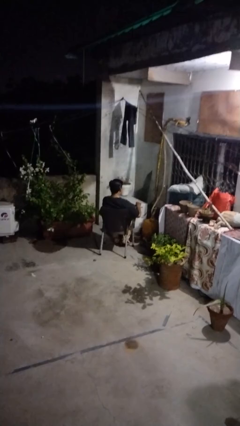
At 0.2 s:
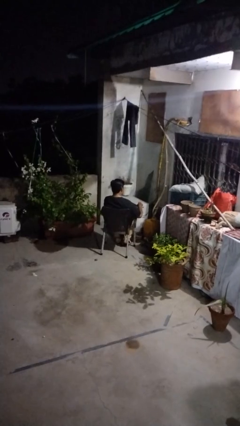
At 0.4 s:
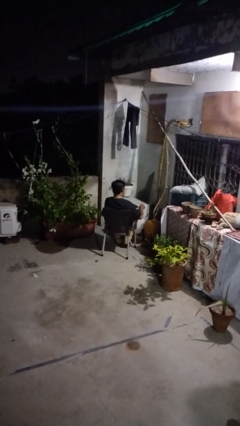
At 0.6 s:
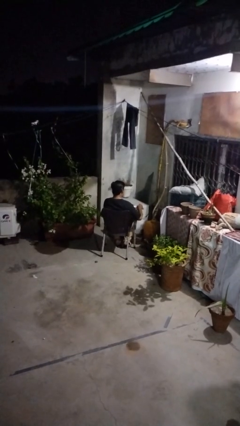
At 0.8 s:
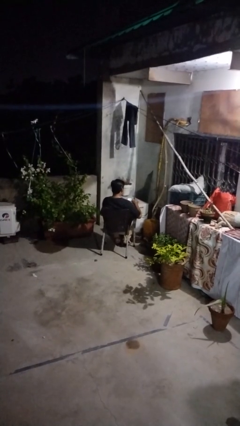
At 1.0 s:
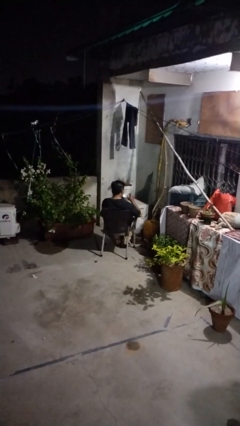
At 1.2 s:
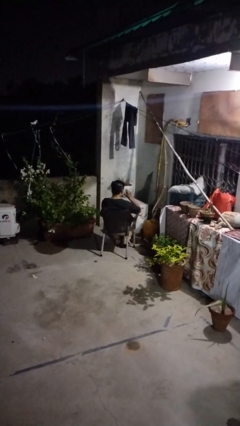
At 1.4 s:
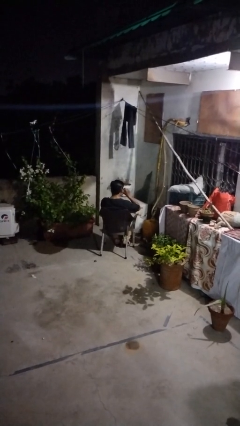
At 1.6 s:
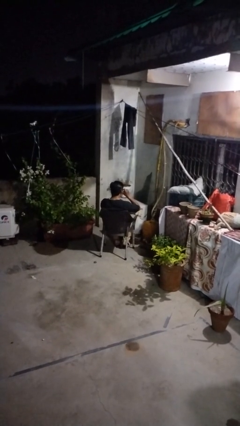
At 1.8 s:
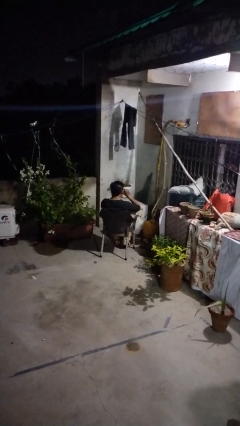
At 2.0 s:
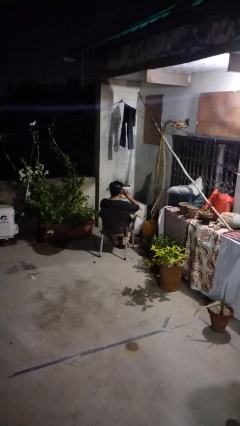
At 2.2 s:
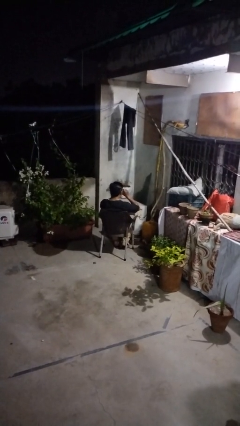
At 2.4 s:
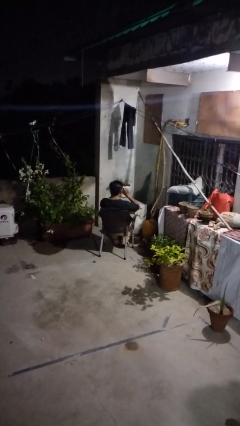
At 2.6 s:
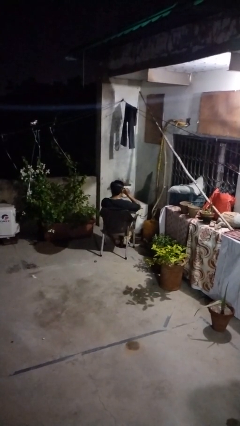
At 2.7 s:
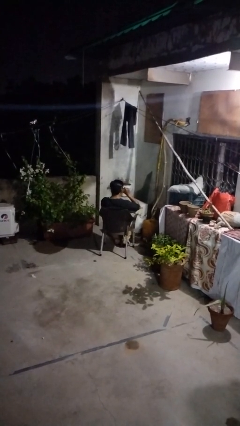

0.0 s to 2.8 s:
person drinks from mug

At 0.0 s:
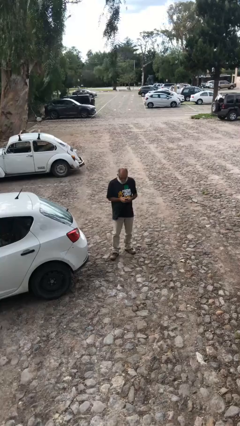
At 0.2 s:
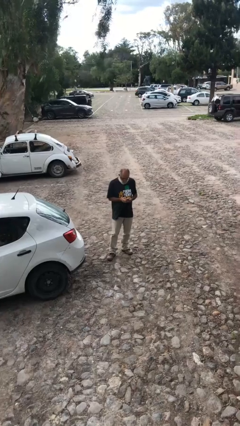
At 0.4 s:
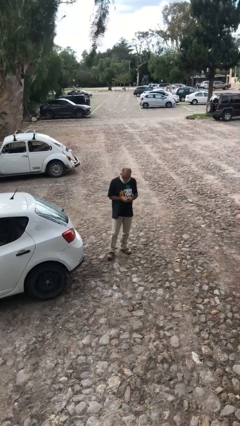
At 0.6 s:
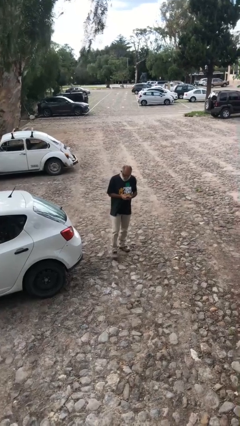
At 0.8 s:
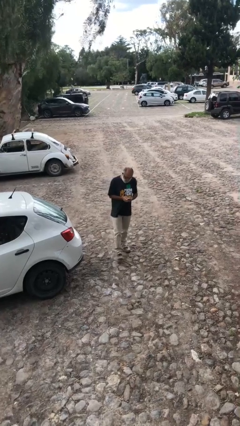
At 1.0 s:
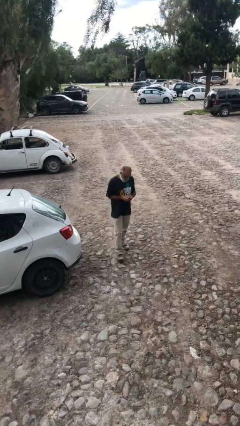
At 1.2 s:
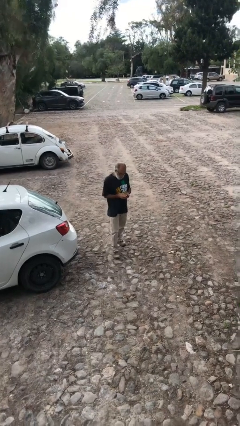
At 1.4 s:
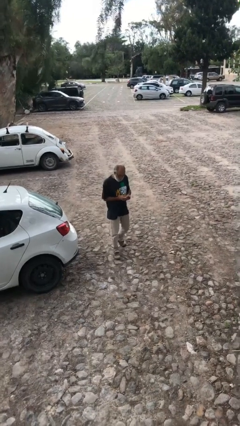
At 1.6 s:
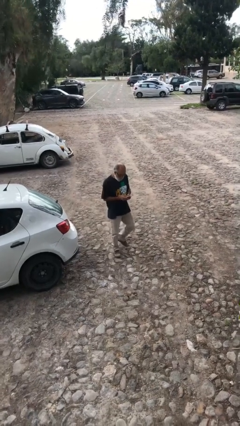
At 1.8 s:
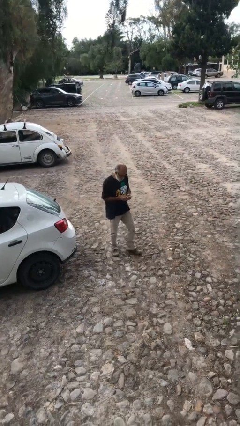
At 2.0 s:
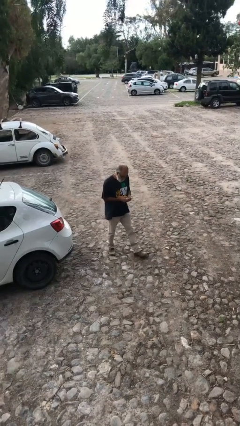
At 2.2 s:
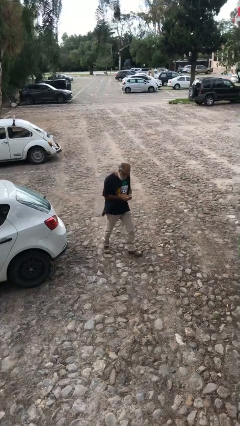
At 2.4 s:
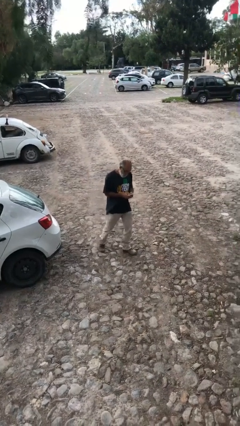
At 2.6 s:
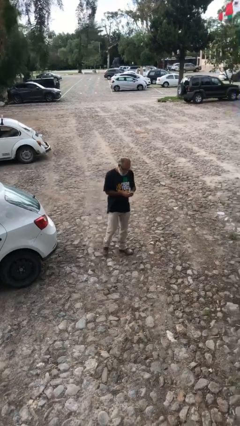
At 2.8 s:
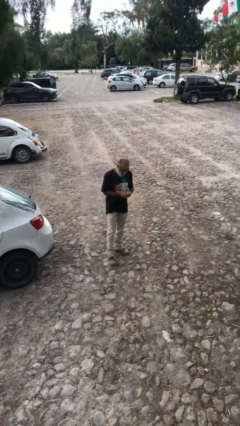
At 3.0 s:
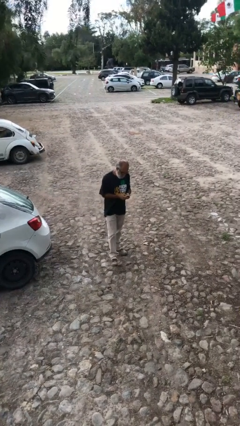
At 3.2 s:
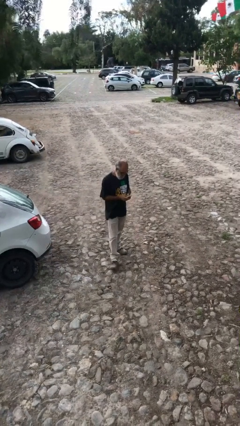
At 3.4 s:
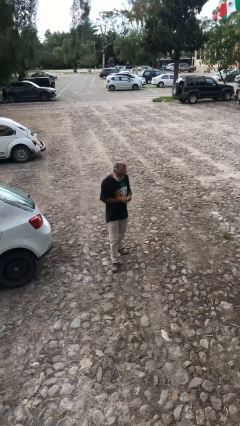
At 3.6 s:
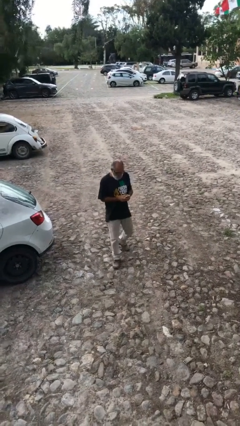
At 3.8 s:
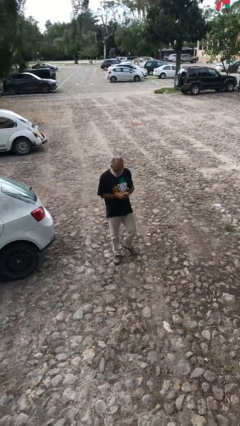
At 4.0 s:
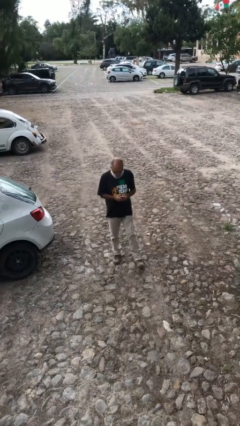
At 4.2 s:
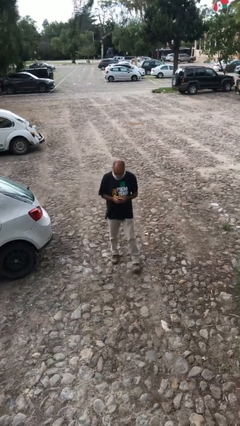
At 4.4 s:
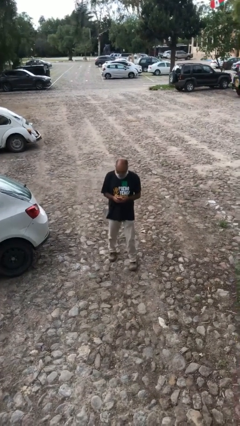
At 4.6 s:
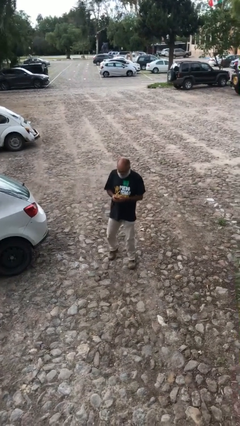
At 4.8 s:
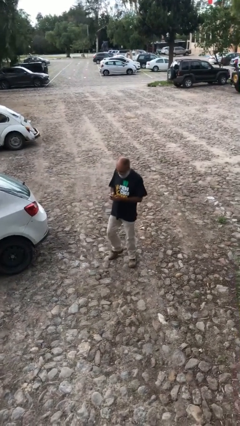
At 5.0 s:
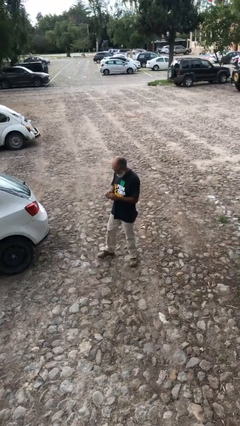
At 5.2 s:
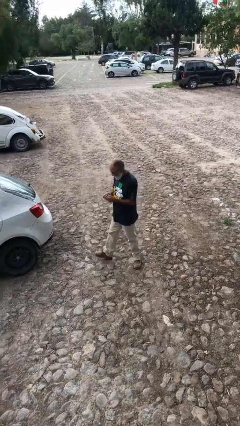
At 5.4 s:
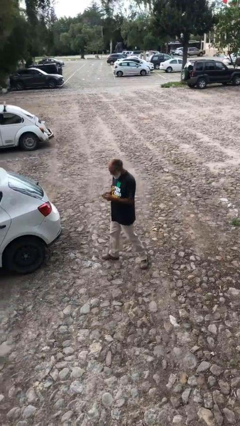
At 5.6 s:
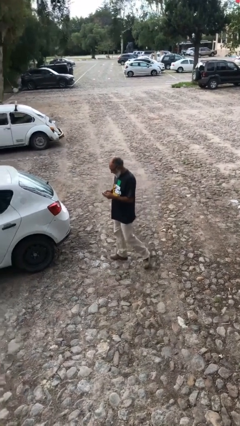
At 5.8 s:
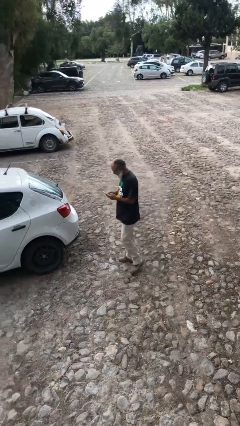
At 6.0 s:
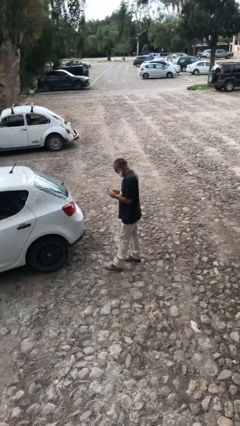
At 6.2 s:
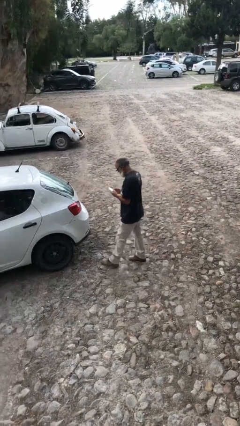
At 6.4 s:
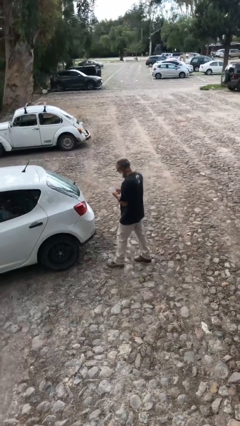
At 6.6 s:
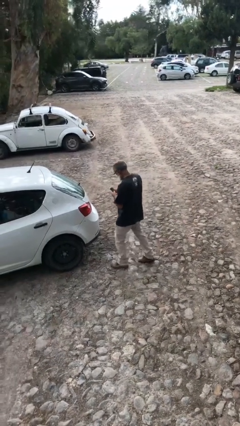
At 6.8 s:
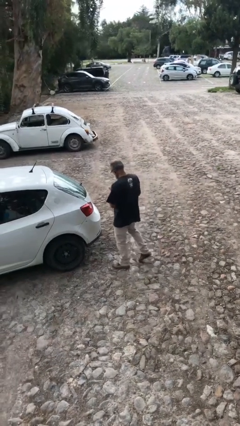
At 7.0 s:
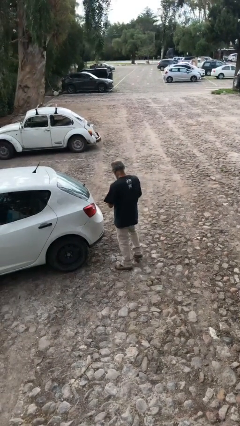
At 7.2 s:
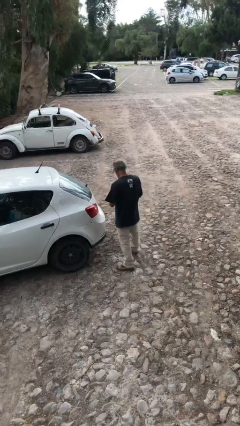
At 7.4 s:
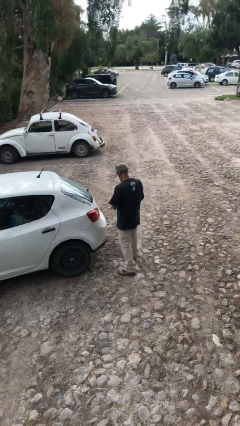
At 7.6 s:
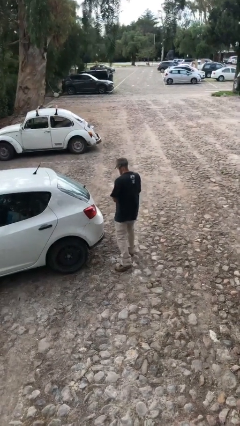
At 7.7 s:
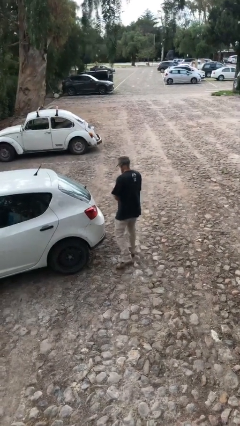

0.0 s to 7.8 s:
person texts on phone

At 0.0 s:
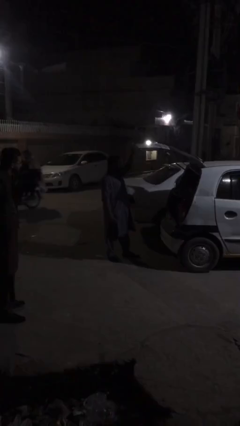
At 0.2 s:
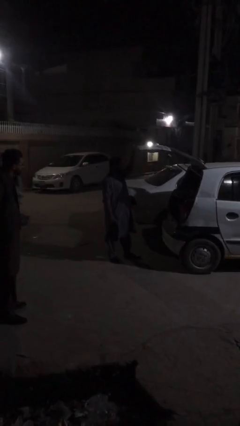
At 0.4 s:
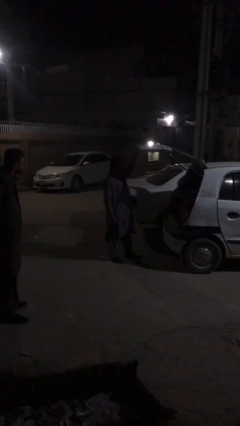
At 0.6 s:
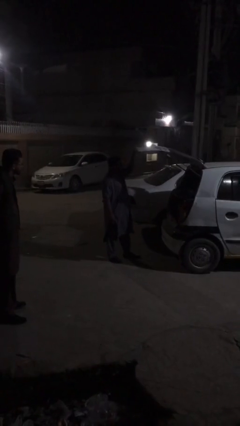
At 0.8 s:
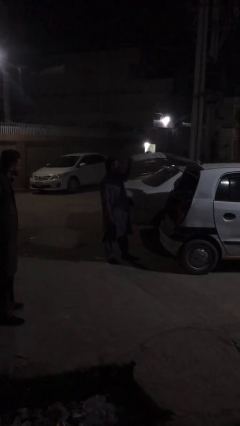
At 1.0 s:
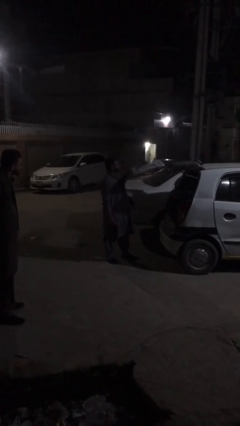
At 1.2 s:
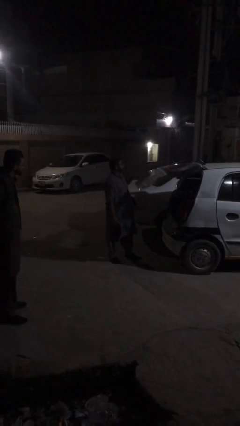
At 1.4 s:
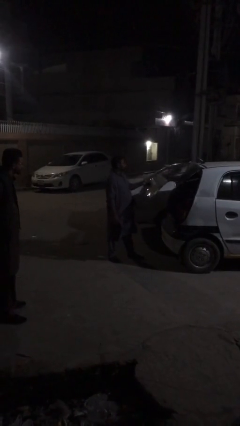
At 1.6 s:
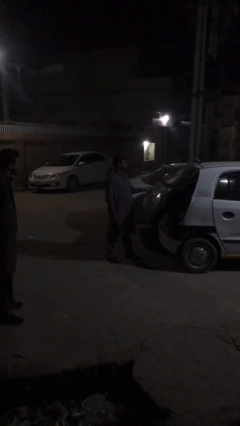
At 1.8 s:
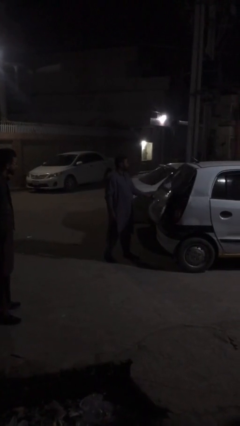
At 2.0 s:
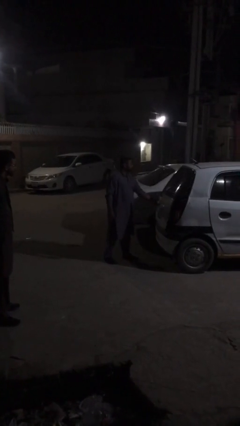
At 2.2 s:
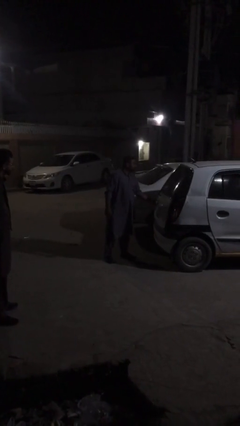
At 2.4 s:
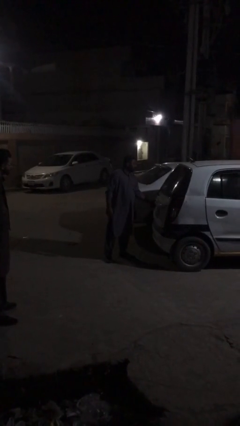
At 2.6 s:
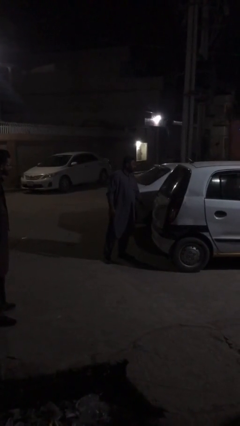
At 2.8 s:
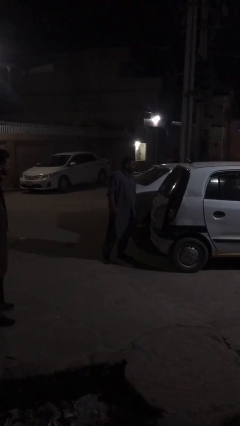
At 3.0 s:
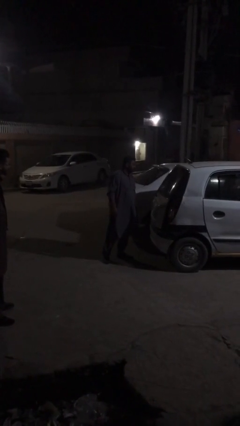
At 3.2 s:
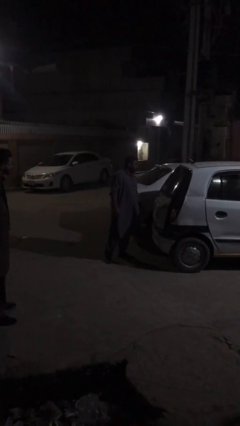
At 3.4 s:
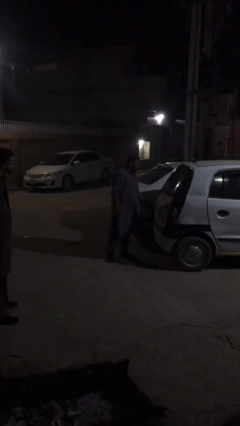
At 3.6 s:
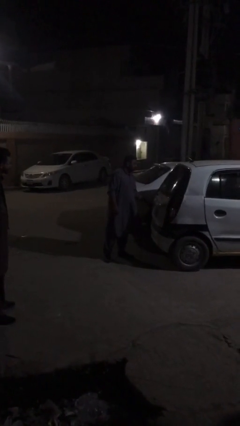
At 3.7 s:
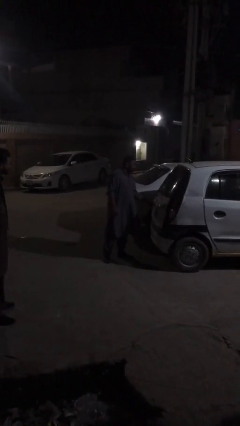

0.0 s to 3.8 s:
person closes car trunk

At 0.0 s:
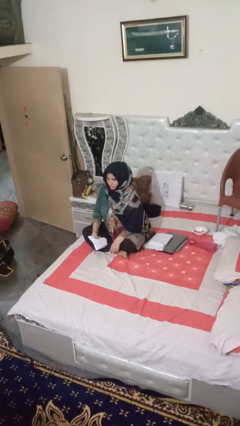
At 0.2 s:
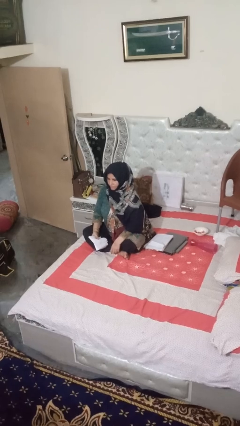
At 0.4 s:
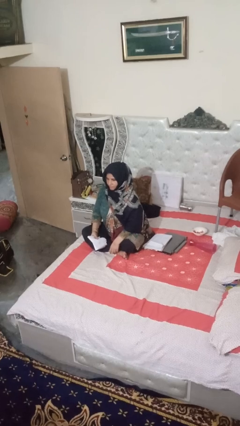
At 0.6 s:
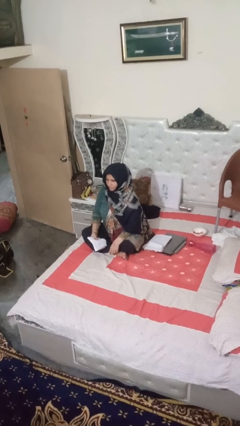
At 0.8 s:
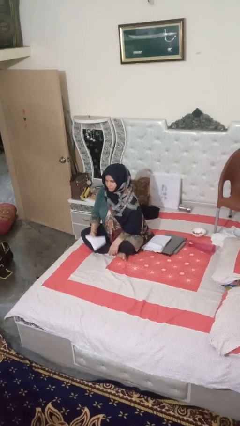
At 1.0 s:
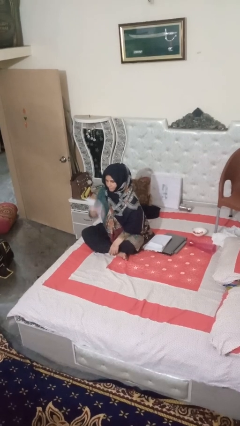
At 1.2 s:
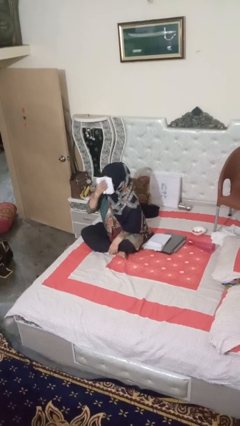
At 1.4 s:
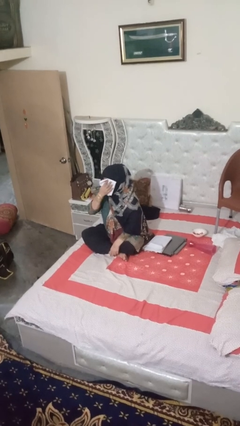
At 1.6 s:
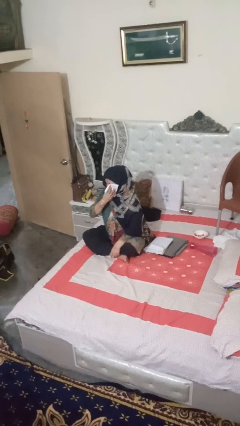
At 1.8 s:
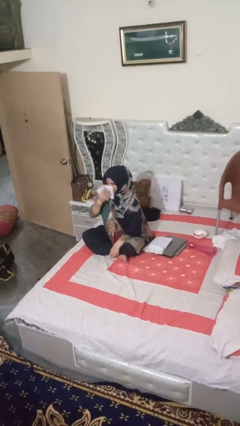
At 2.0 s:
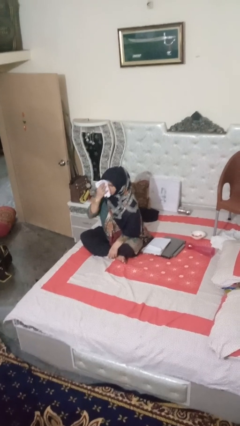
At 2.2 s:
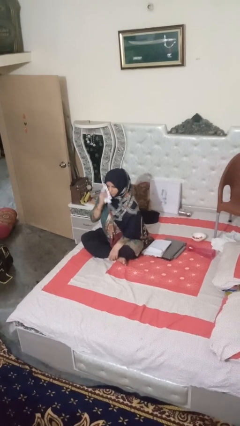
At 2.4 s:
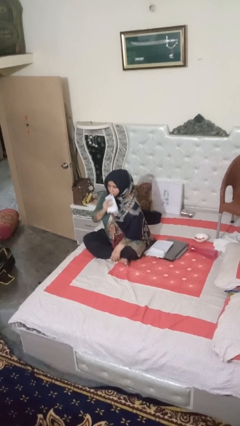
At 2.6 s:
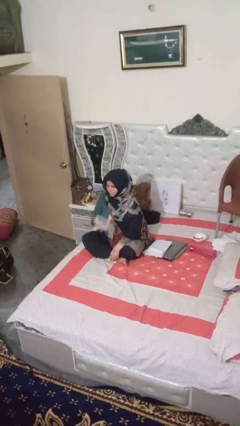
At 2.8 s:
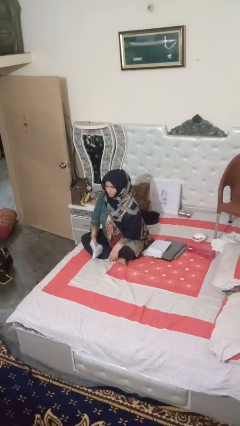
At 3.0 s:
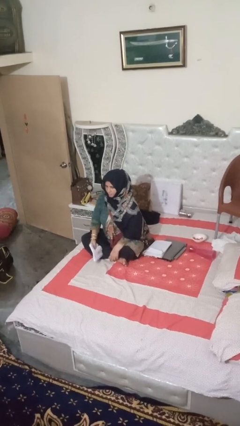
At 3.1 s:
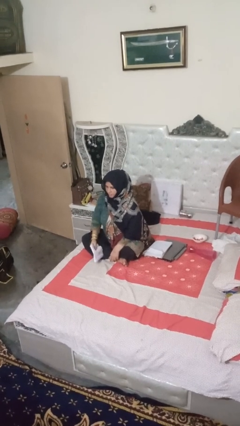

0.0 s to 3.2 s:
person wipes mouth with napkin

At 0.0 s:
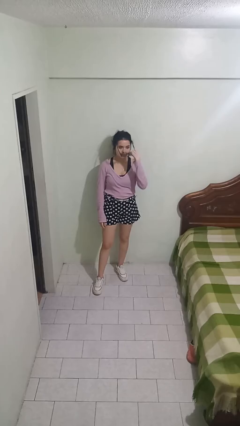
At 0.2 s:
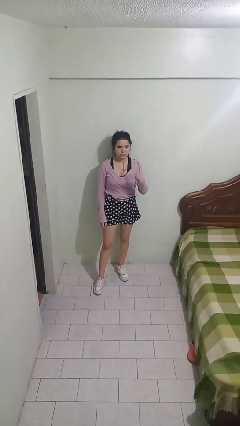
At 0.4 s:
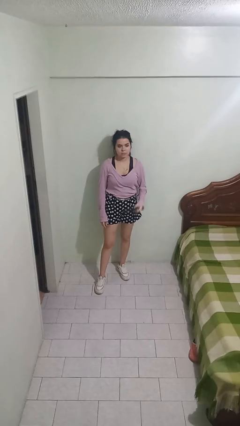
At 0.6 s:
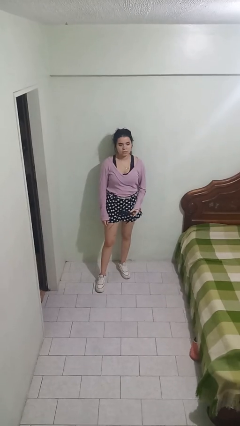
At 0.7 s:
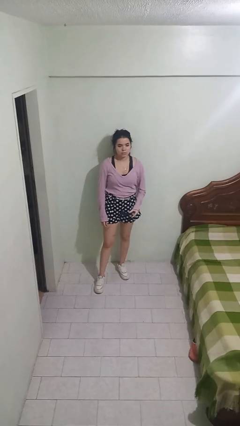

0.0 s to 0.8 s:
person takes off sunglasses
